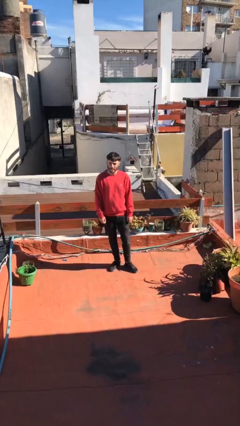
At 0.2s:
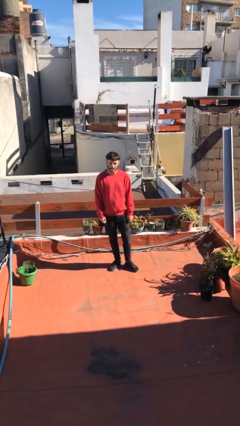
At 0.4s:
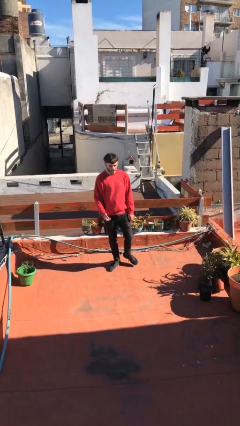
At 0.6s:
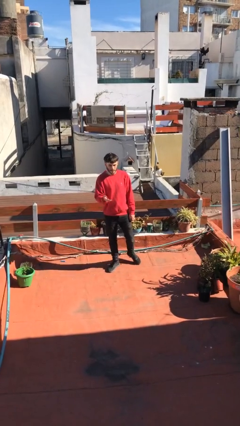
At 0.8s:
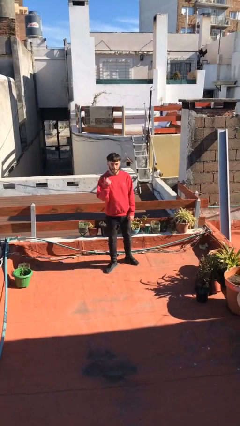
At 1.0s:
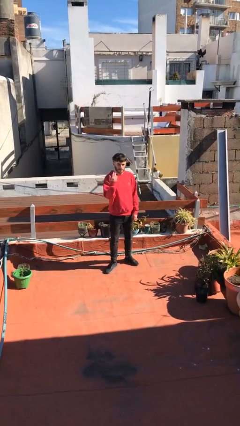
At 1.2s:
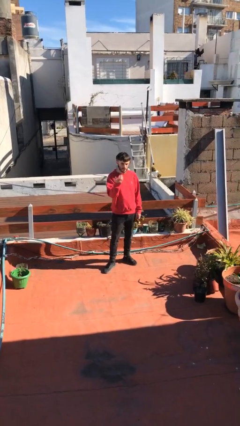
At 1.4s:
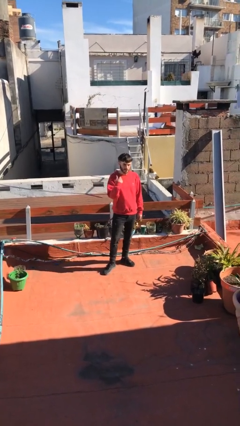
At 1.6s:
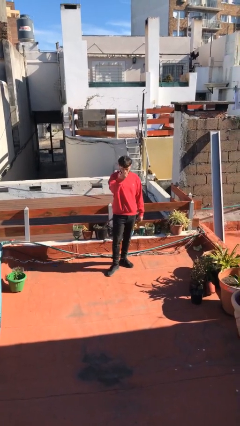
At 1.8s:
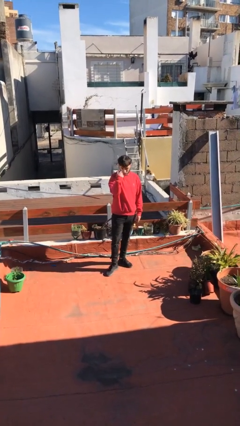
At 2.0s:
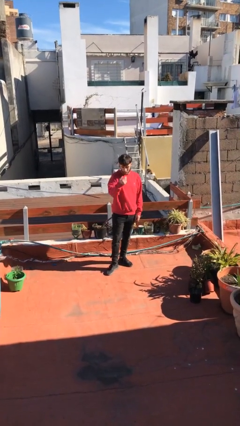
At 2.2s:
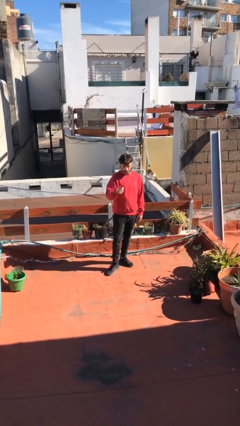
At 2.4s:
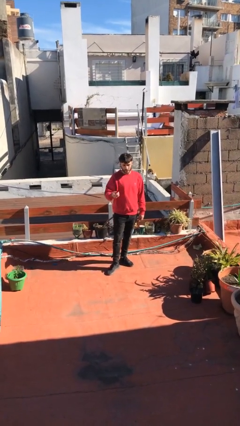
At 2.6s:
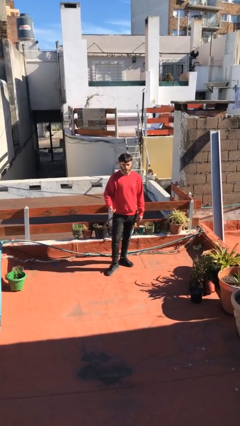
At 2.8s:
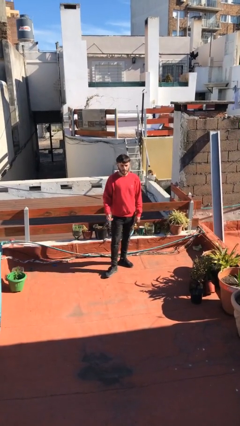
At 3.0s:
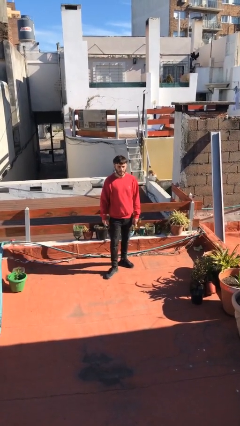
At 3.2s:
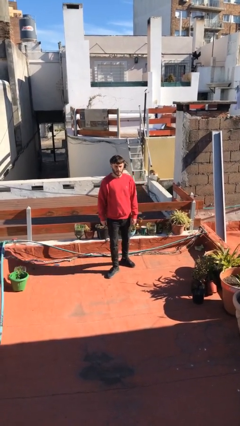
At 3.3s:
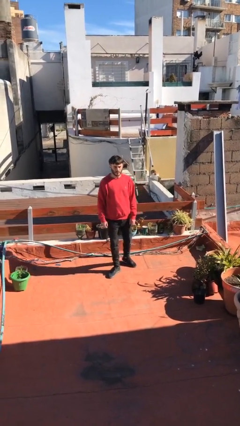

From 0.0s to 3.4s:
person gestures come here

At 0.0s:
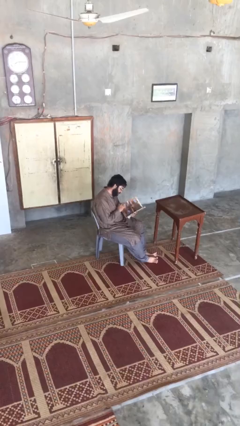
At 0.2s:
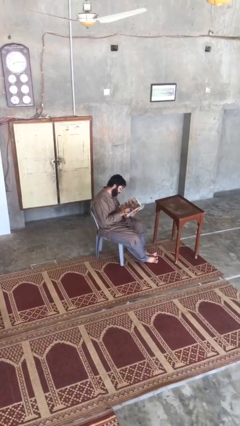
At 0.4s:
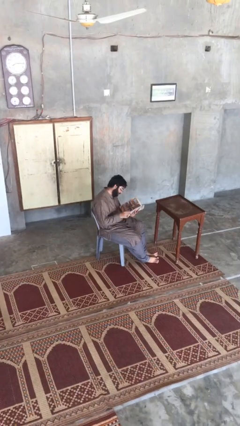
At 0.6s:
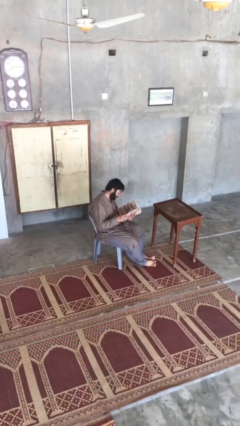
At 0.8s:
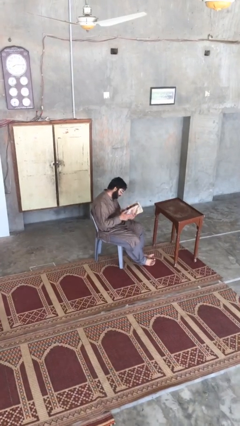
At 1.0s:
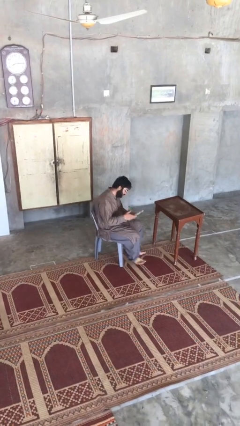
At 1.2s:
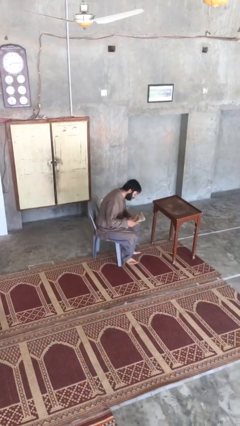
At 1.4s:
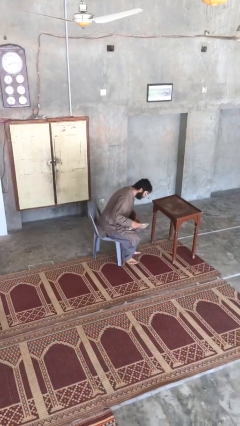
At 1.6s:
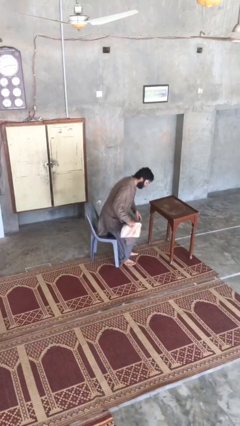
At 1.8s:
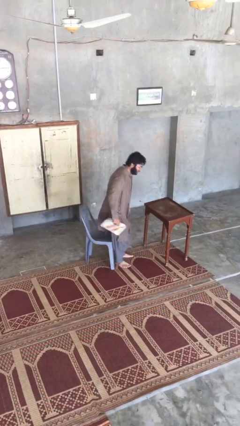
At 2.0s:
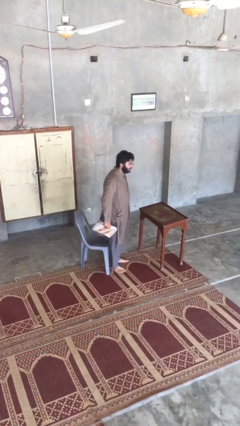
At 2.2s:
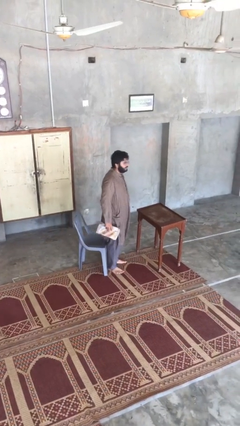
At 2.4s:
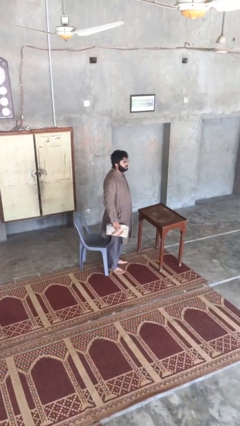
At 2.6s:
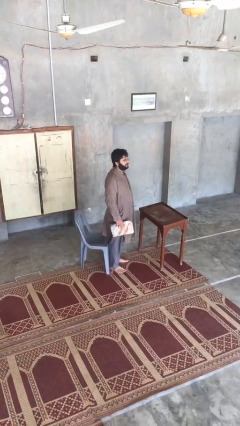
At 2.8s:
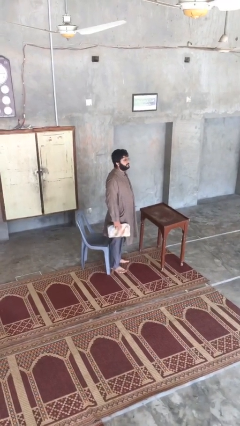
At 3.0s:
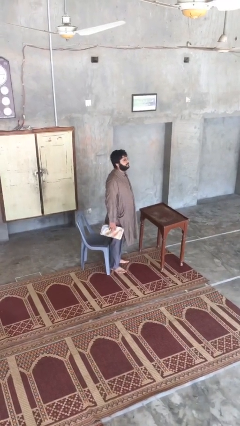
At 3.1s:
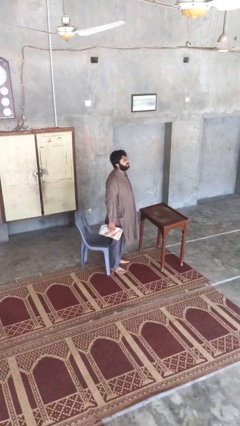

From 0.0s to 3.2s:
person stands up

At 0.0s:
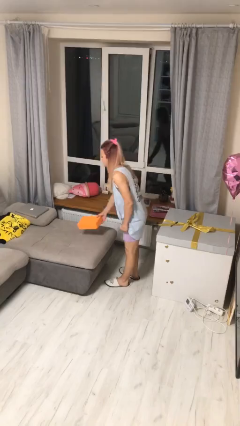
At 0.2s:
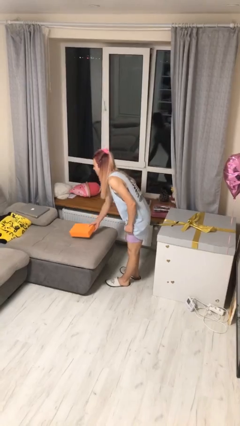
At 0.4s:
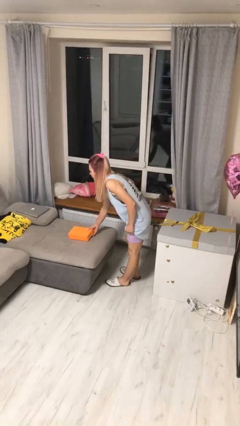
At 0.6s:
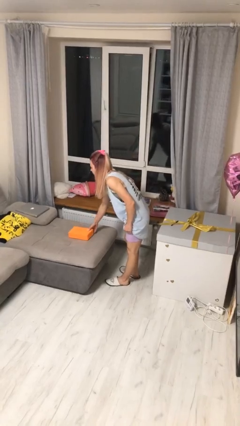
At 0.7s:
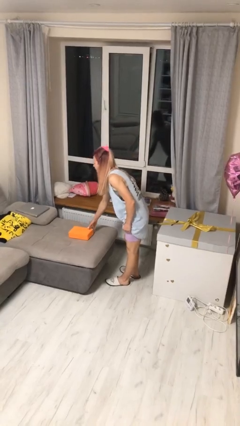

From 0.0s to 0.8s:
person puts down object on couch

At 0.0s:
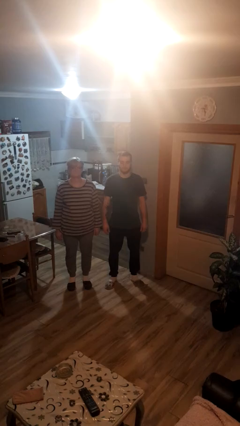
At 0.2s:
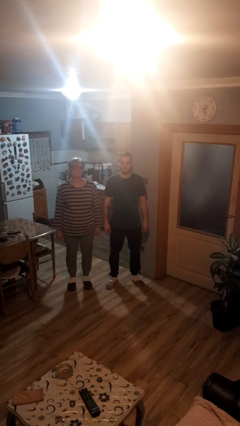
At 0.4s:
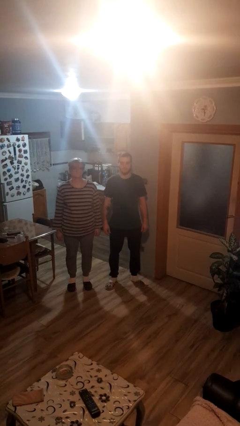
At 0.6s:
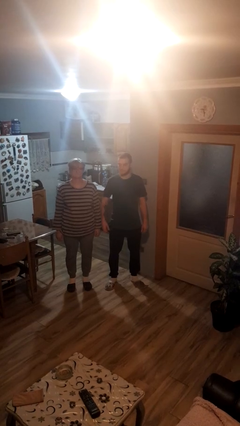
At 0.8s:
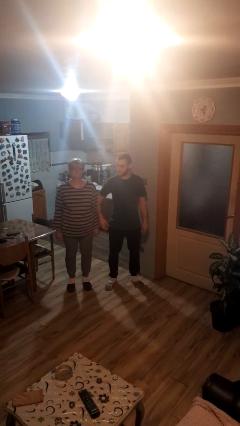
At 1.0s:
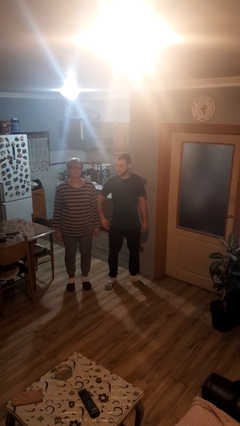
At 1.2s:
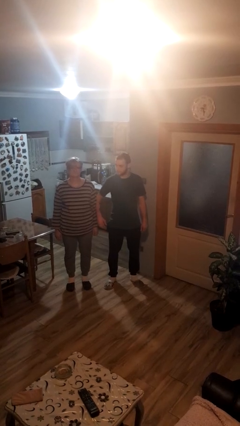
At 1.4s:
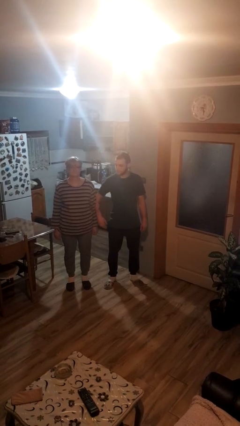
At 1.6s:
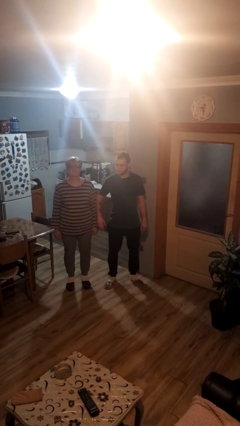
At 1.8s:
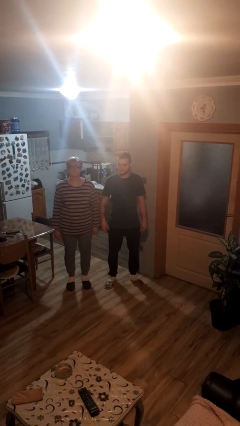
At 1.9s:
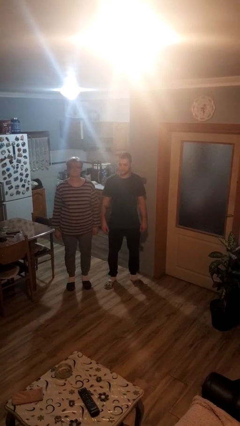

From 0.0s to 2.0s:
person nudges person with elbow

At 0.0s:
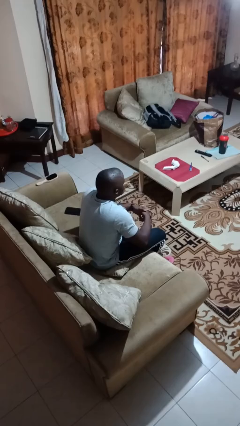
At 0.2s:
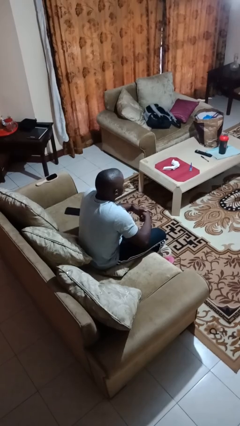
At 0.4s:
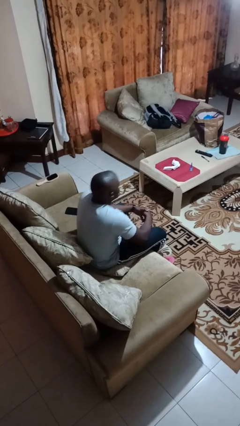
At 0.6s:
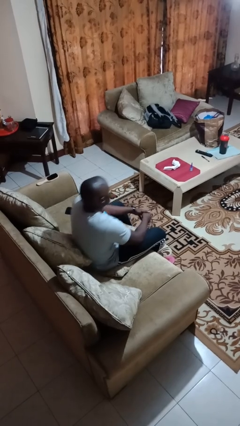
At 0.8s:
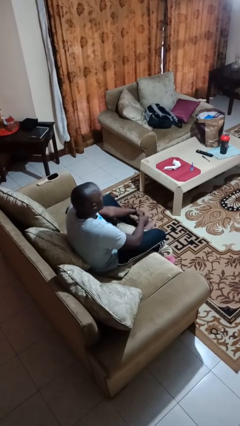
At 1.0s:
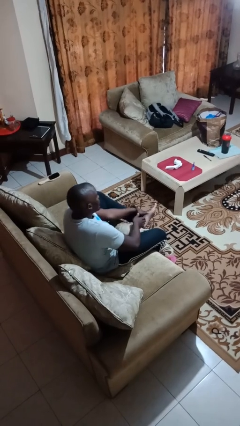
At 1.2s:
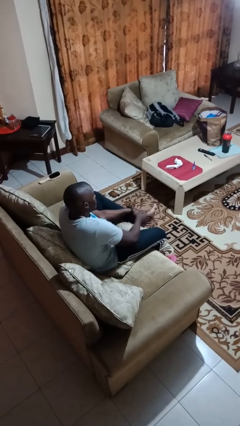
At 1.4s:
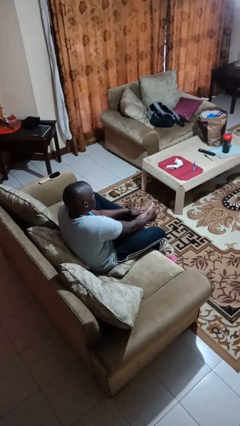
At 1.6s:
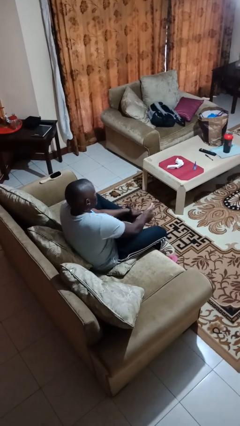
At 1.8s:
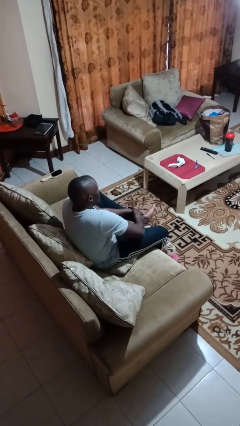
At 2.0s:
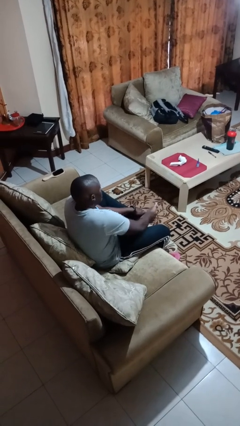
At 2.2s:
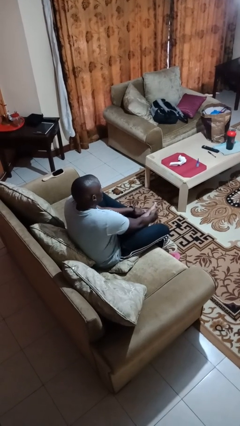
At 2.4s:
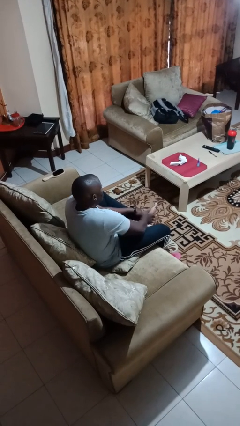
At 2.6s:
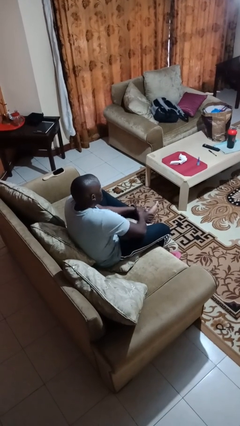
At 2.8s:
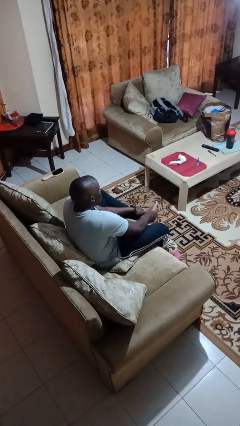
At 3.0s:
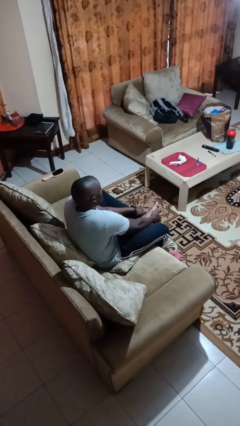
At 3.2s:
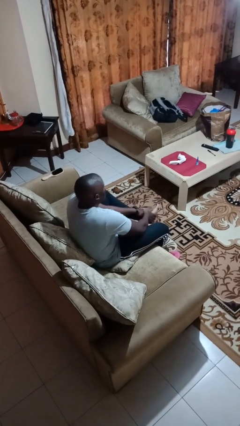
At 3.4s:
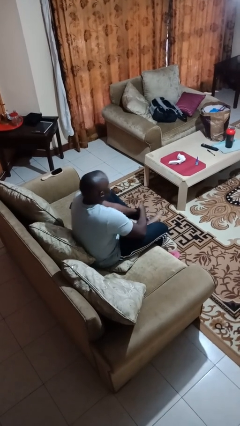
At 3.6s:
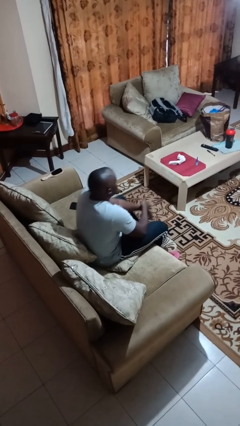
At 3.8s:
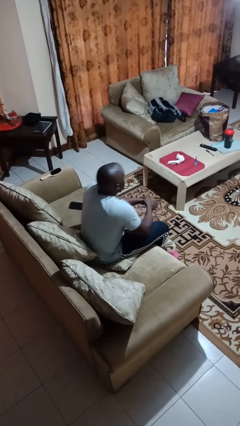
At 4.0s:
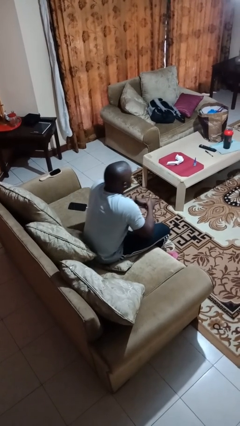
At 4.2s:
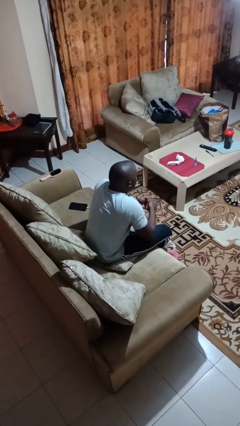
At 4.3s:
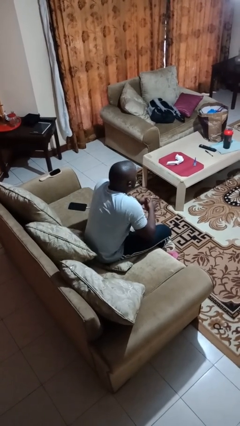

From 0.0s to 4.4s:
person rubs foot

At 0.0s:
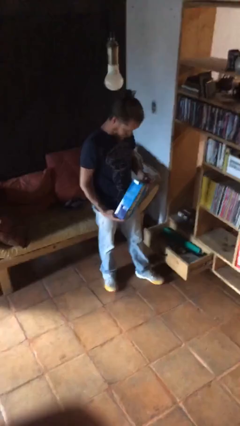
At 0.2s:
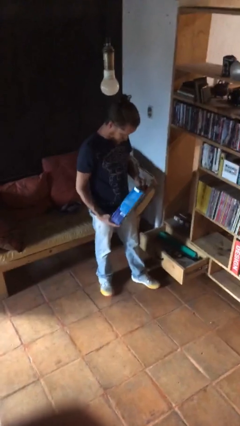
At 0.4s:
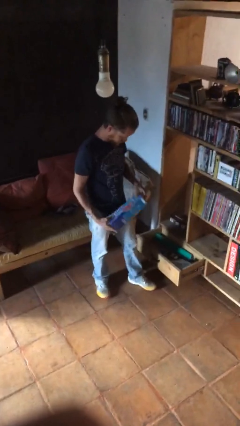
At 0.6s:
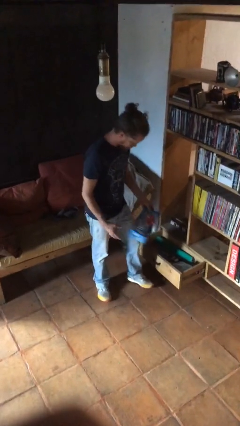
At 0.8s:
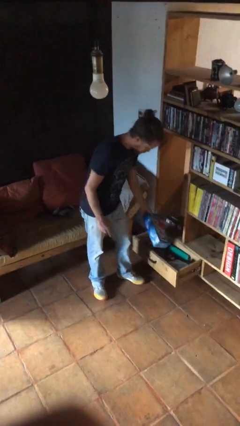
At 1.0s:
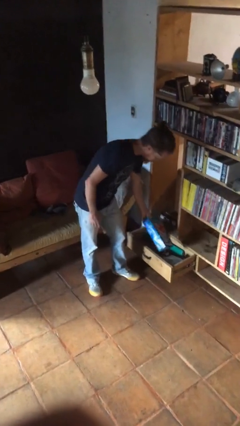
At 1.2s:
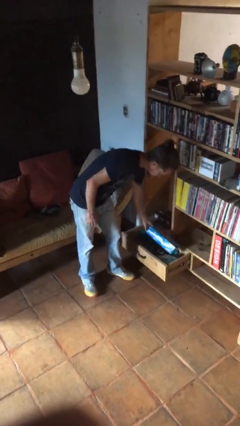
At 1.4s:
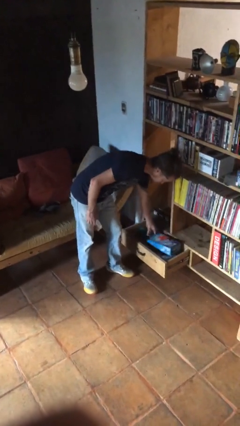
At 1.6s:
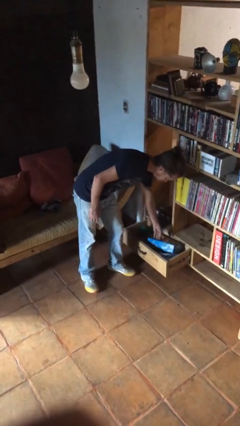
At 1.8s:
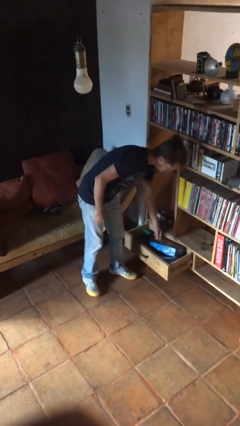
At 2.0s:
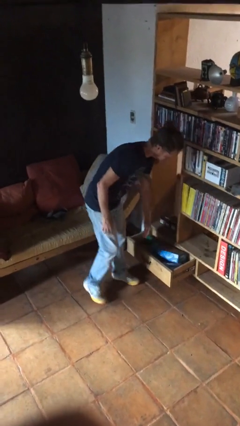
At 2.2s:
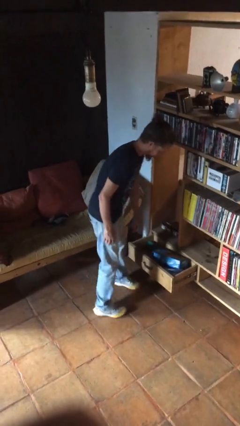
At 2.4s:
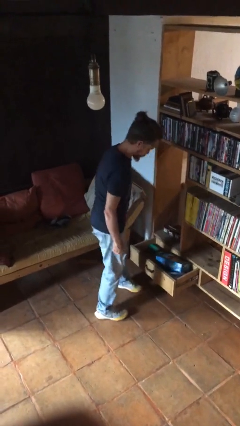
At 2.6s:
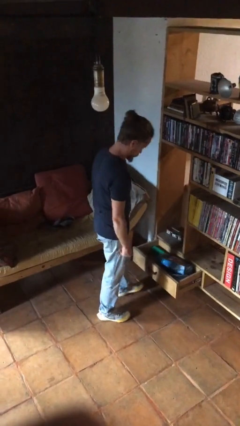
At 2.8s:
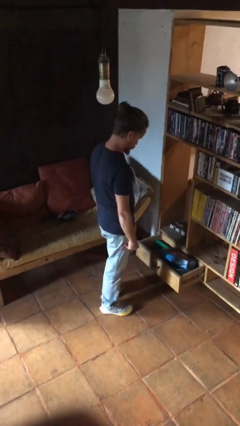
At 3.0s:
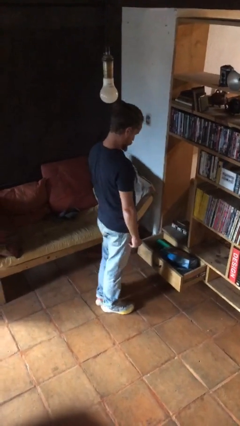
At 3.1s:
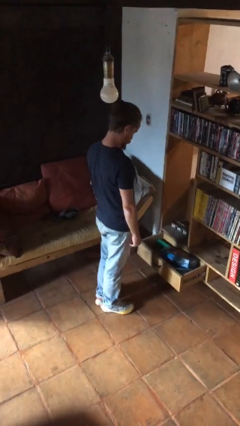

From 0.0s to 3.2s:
person puts down object into cabinet

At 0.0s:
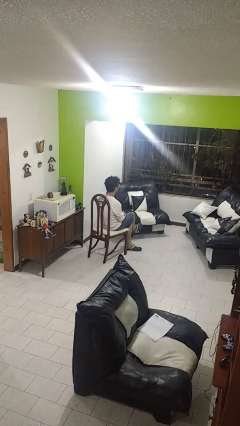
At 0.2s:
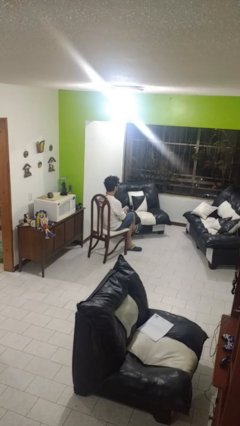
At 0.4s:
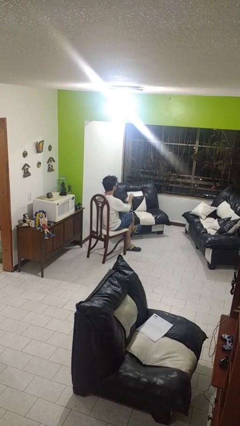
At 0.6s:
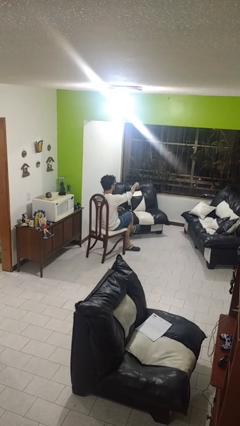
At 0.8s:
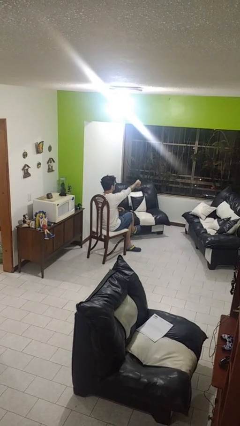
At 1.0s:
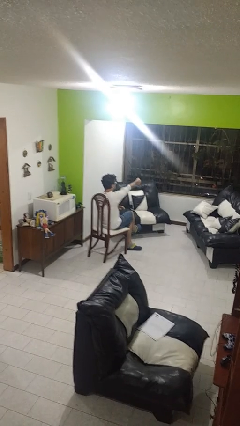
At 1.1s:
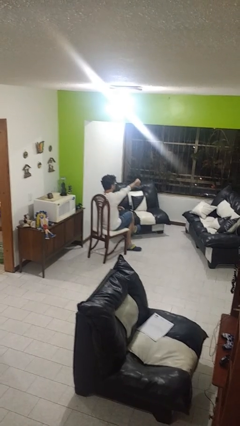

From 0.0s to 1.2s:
person uses television remote
